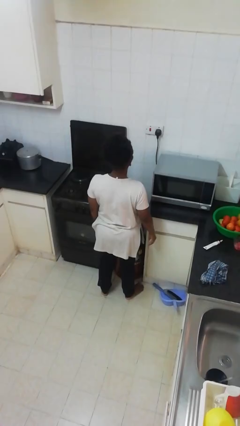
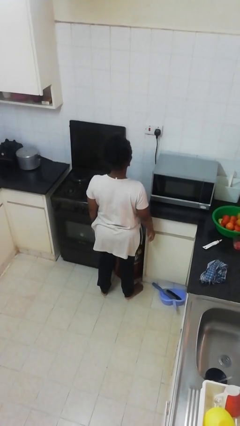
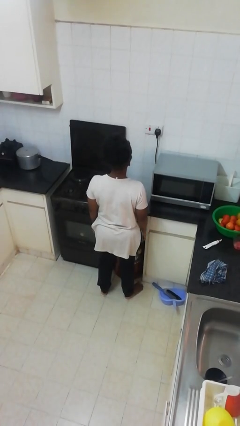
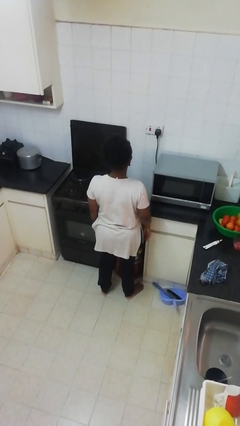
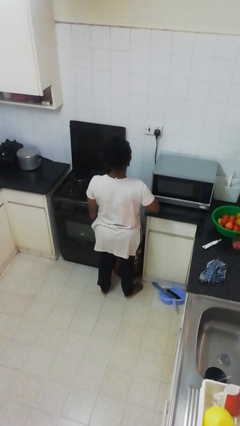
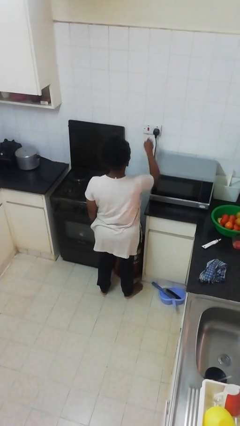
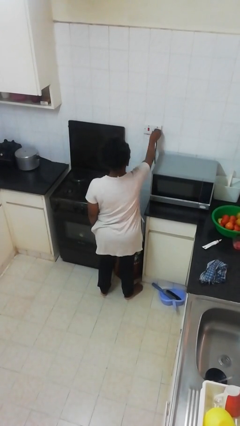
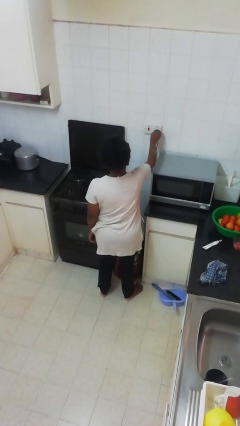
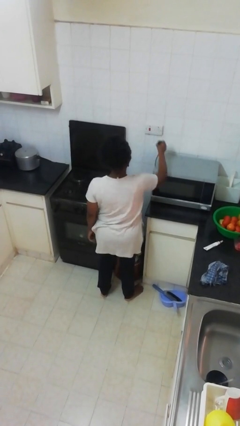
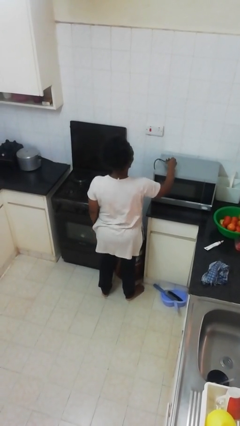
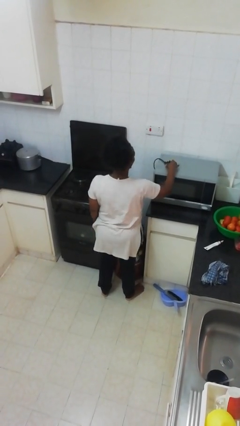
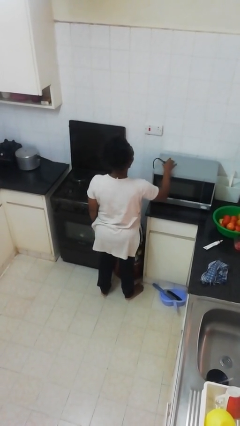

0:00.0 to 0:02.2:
person unplugs from electrical socket

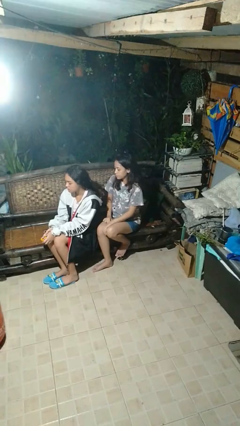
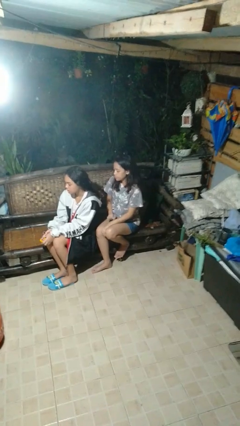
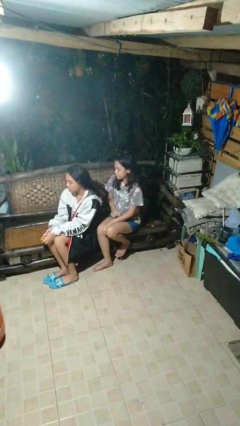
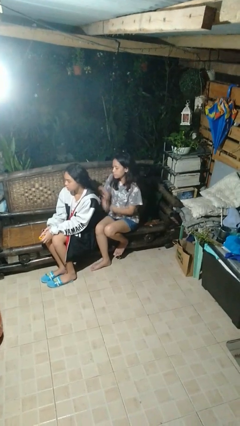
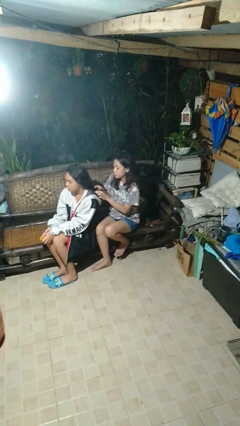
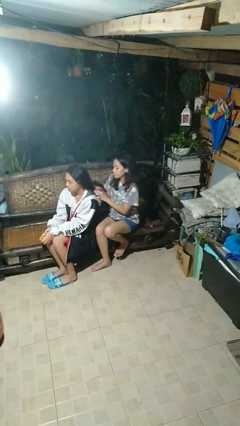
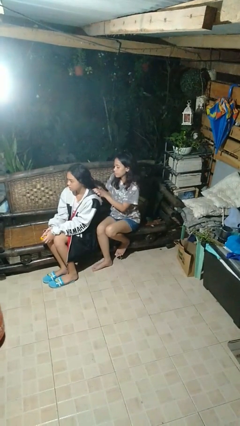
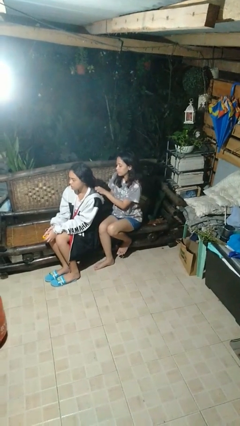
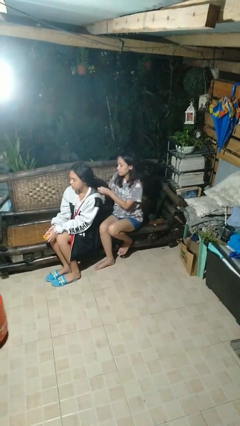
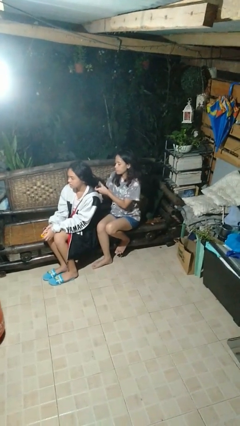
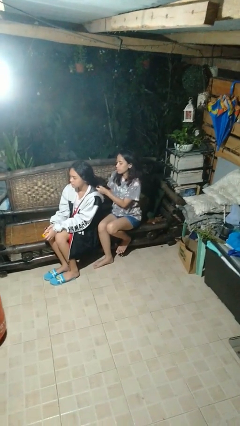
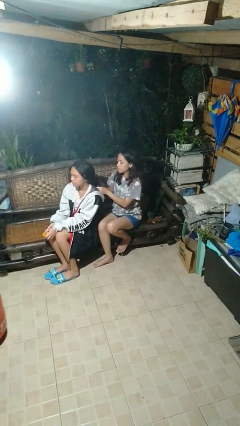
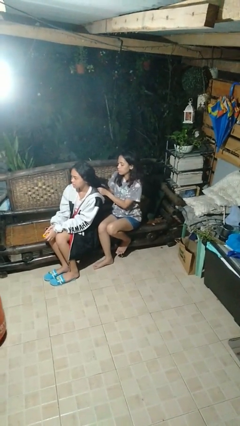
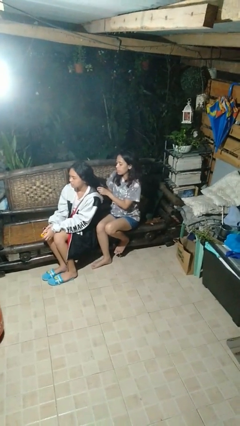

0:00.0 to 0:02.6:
person braids hair of person

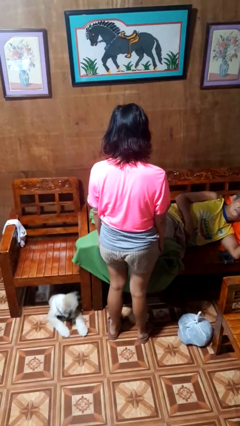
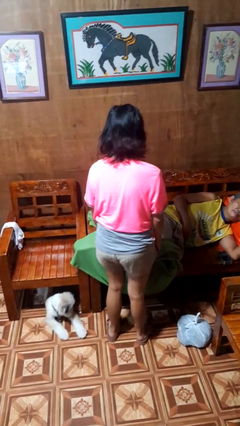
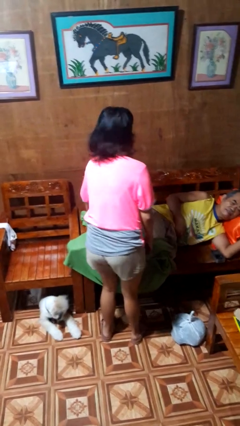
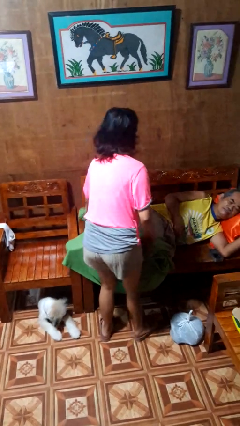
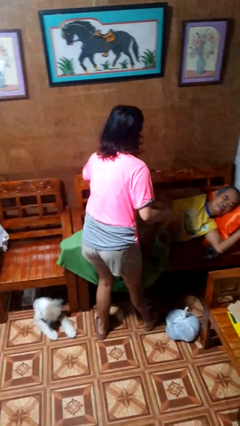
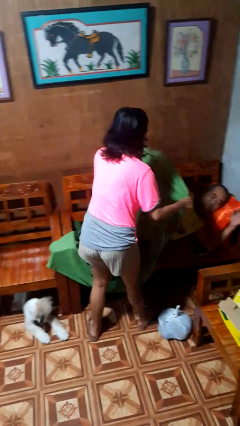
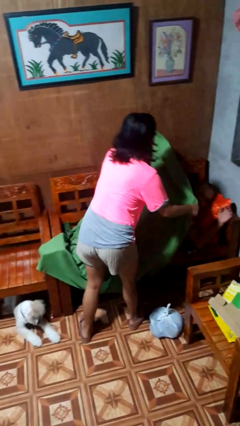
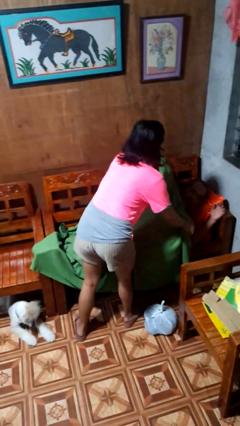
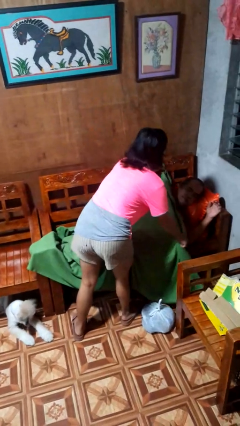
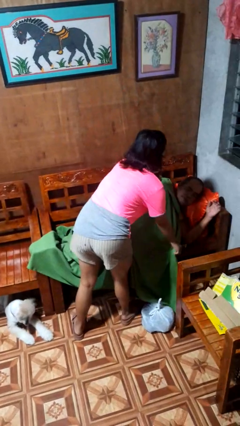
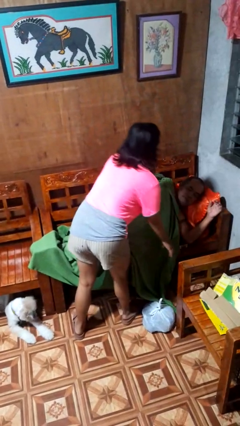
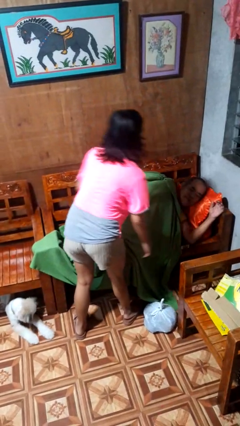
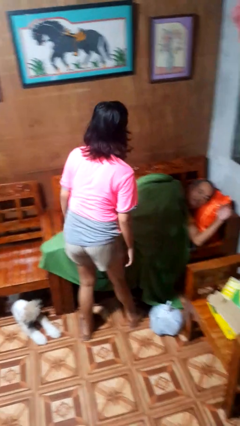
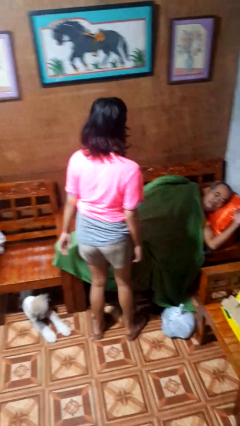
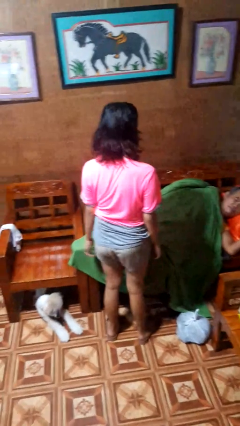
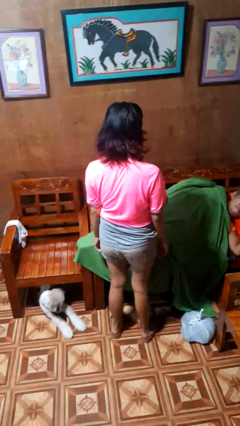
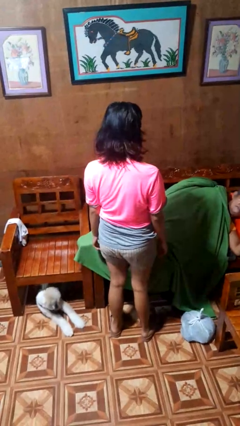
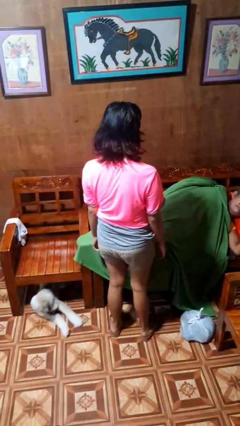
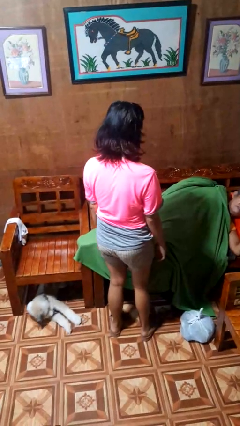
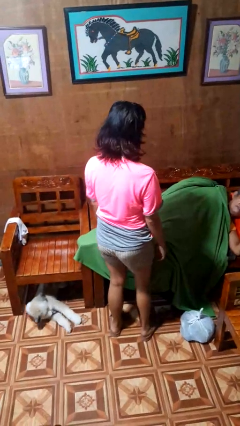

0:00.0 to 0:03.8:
person covers friend with blanket

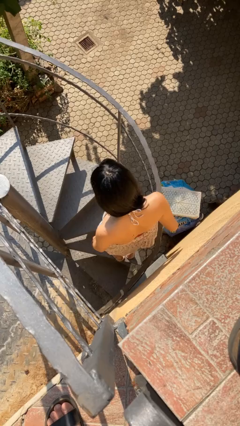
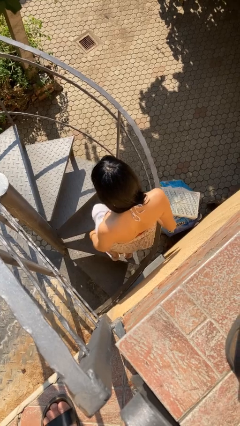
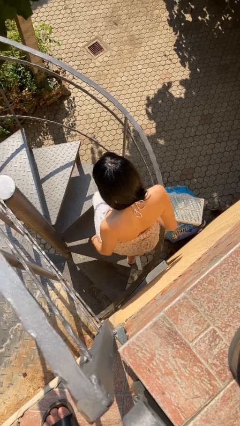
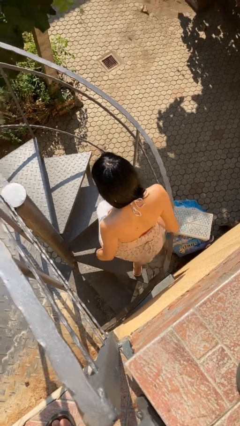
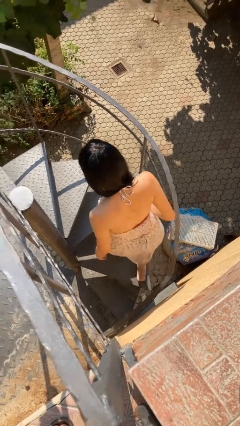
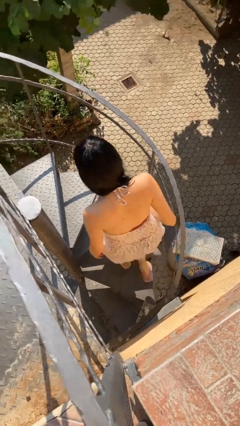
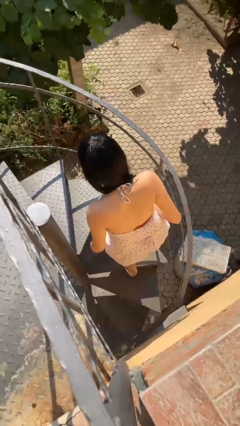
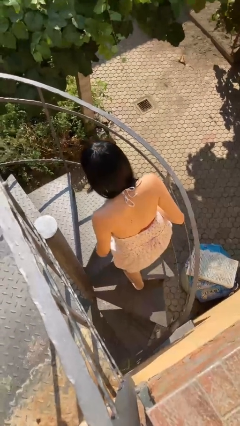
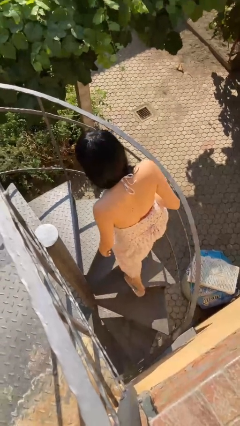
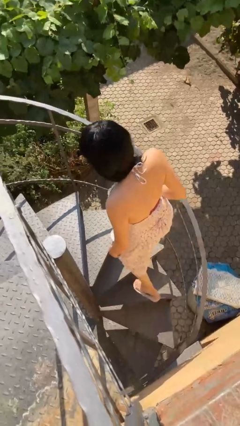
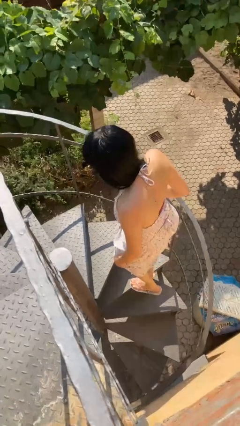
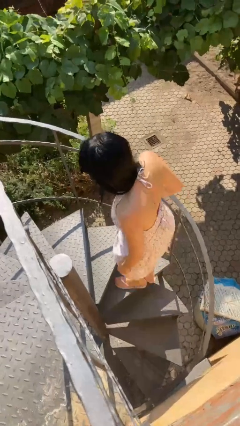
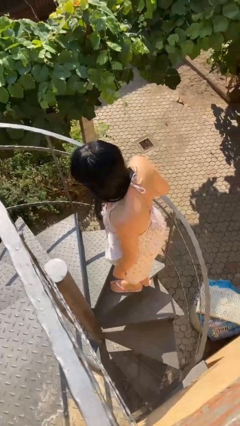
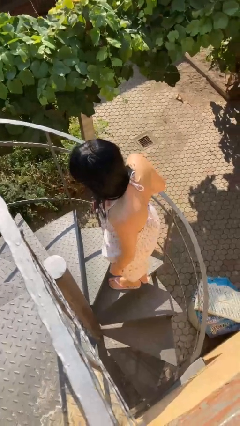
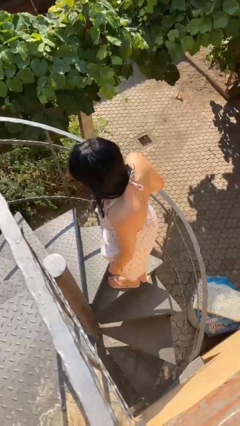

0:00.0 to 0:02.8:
person climbs up stairs

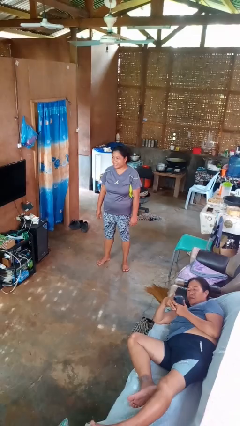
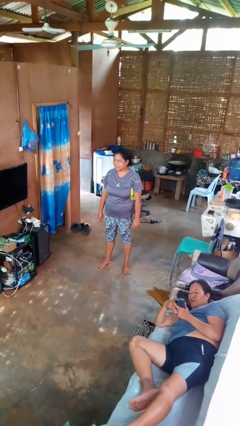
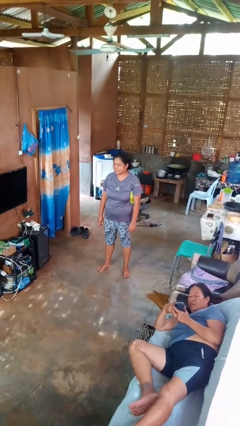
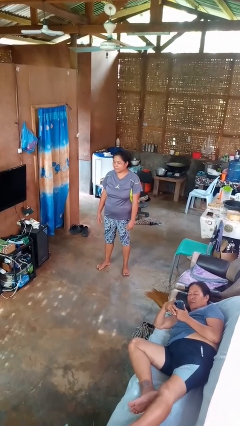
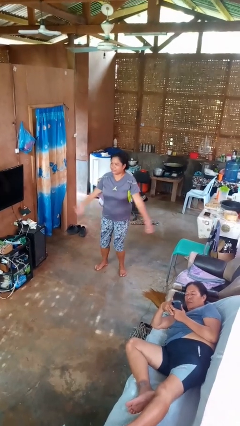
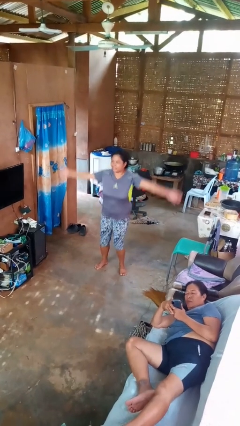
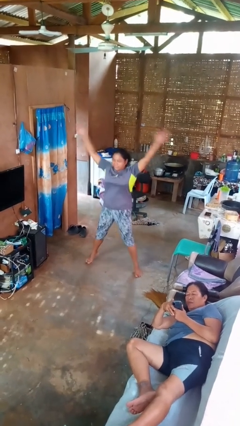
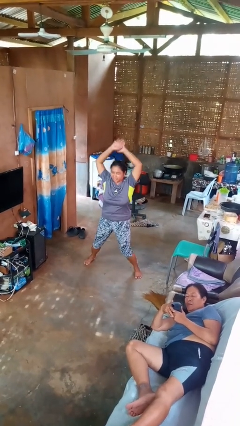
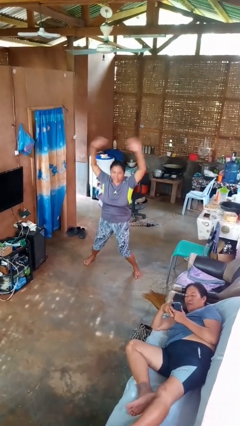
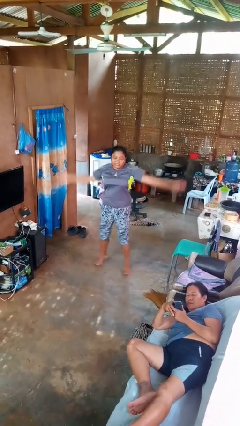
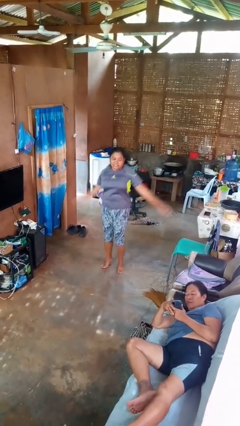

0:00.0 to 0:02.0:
person exercises with jumping jacks

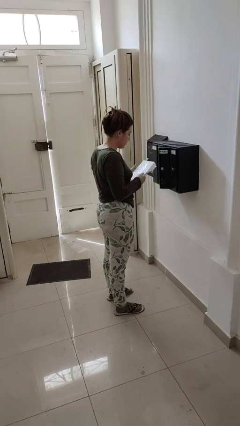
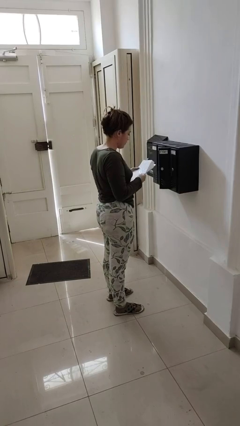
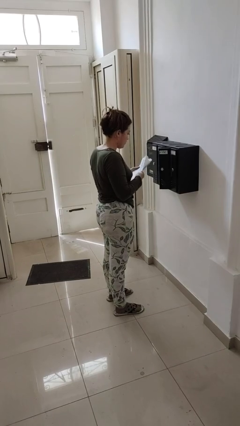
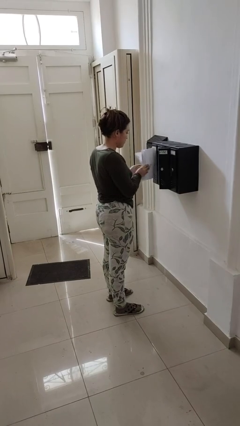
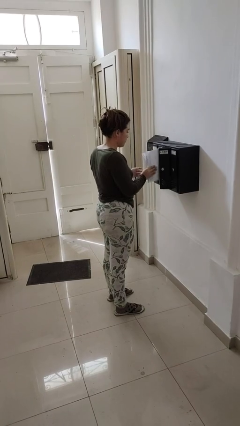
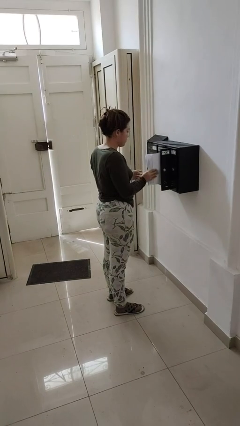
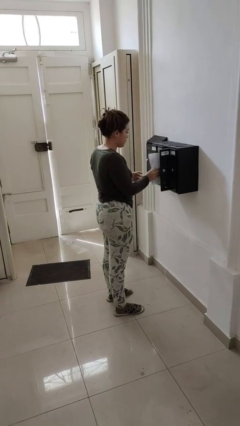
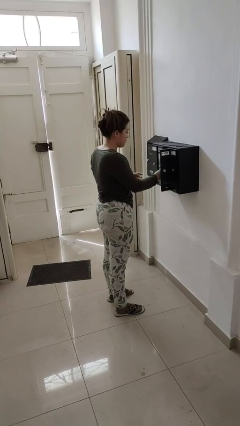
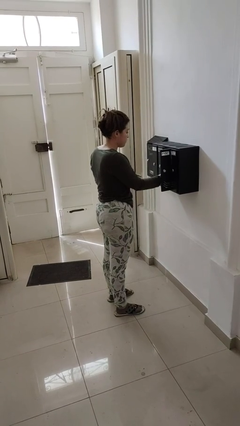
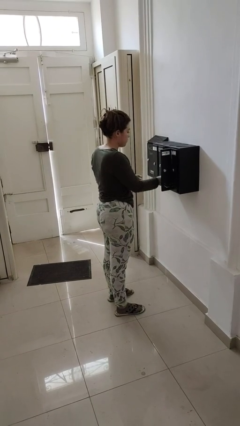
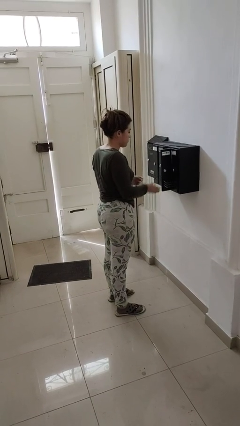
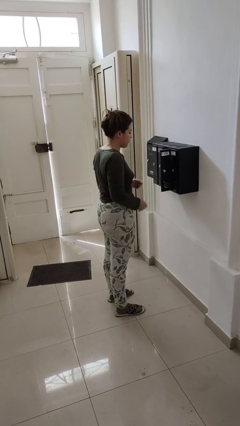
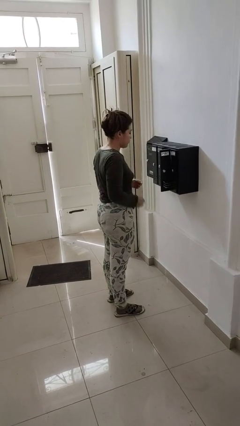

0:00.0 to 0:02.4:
person puts letters in mailbox

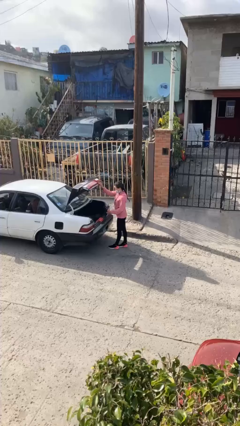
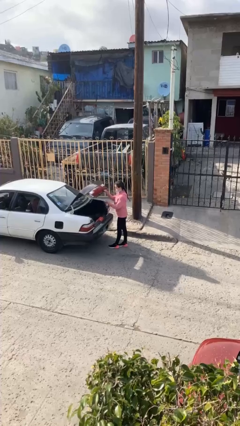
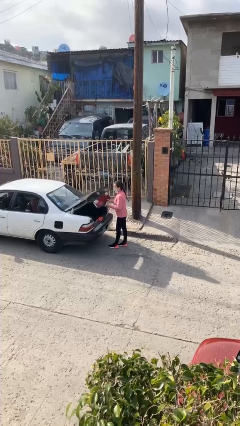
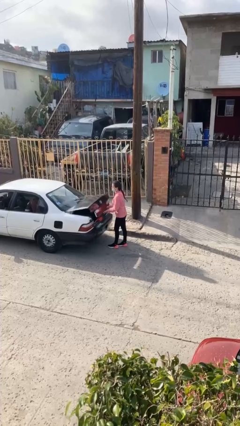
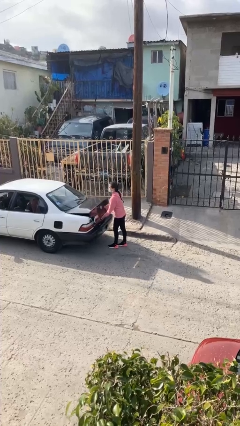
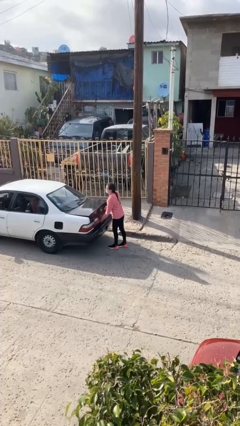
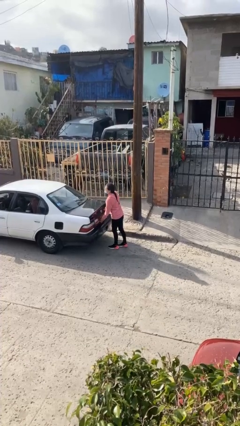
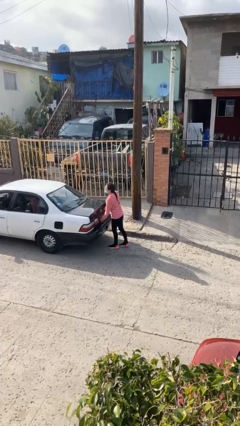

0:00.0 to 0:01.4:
person closes car trunk

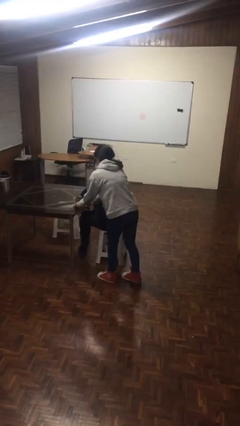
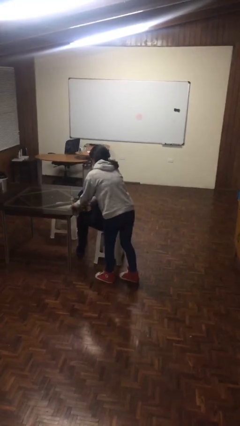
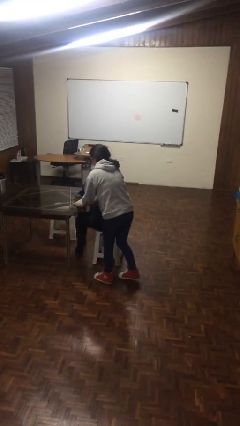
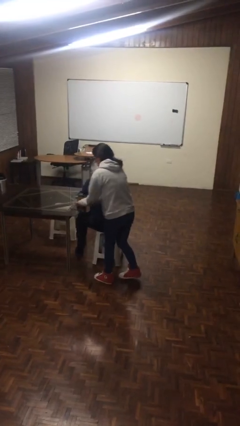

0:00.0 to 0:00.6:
person steals object from person
